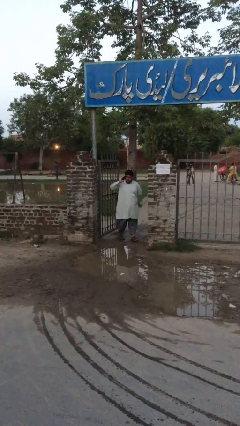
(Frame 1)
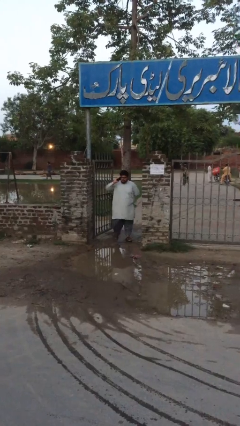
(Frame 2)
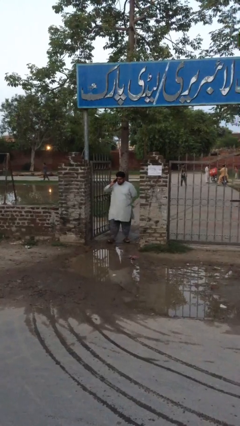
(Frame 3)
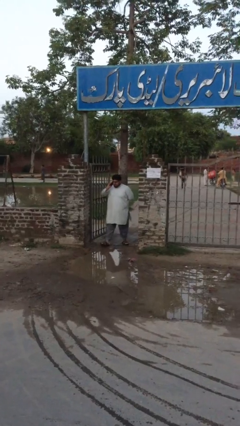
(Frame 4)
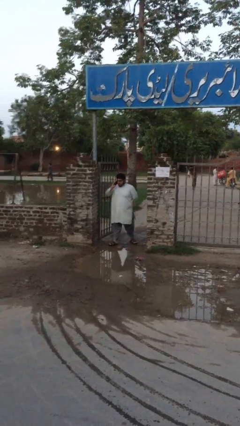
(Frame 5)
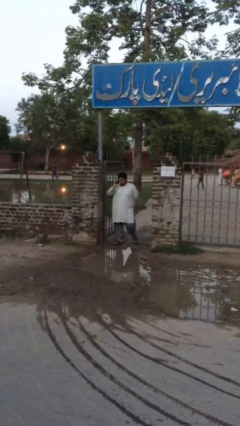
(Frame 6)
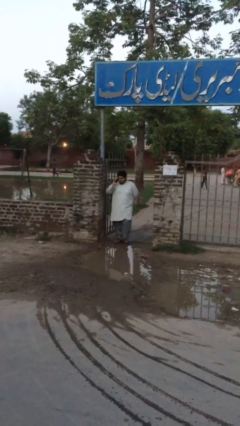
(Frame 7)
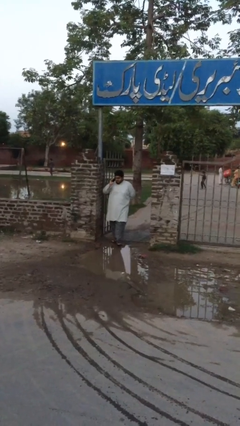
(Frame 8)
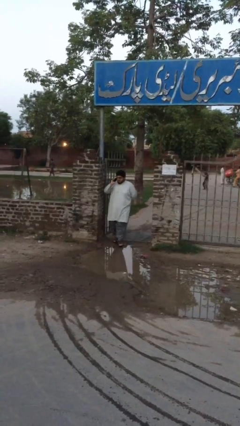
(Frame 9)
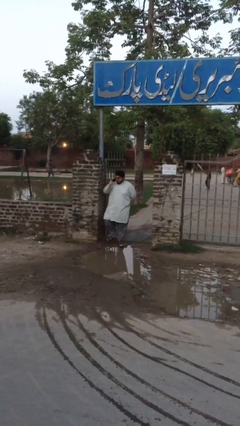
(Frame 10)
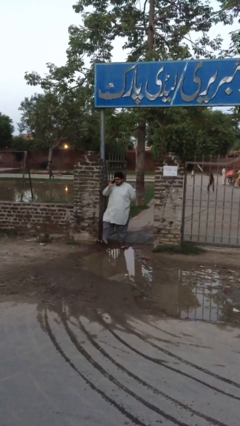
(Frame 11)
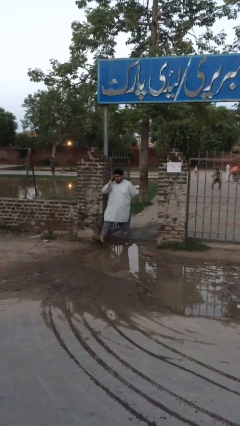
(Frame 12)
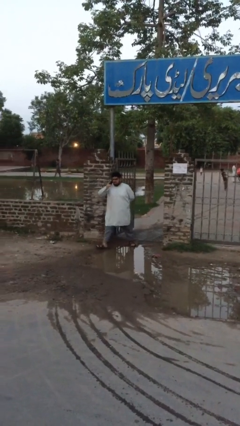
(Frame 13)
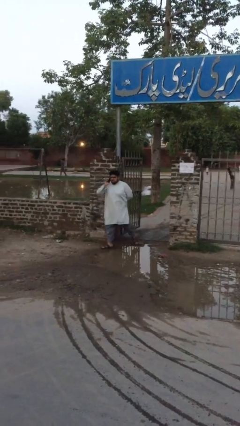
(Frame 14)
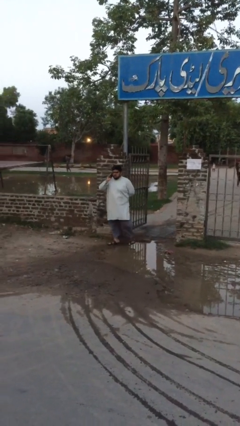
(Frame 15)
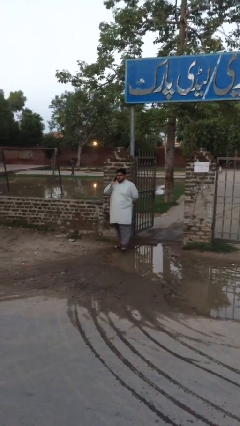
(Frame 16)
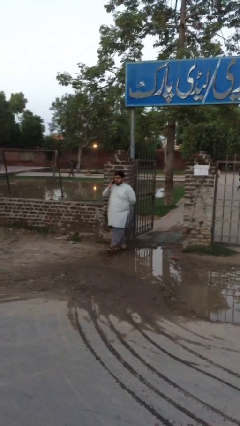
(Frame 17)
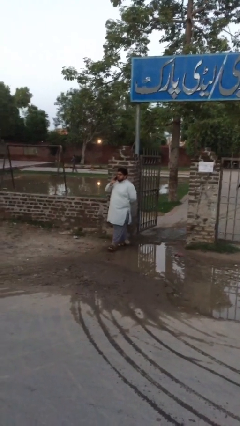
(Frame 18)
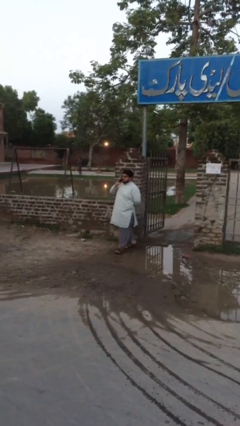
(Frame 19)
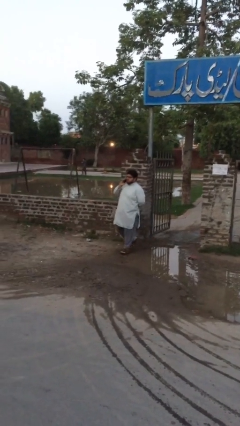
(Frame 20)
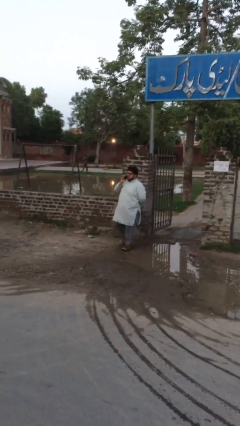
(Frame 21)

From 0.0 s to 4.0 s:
person enters scene through structure

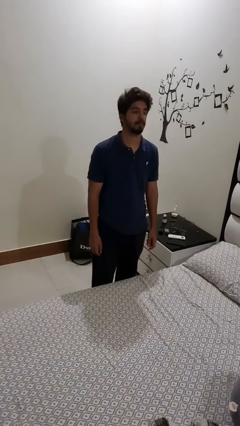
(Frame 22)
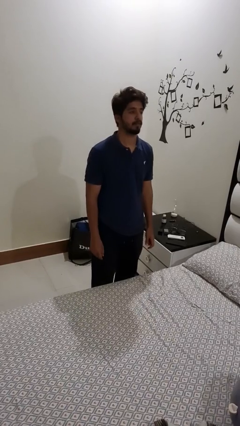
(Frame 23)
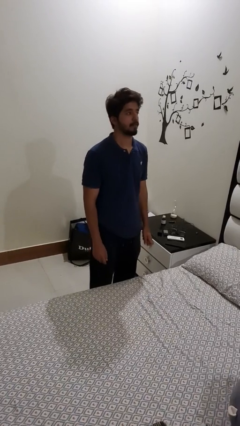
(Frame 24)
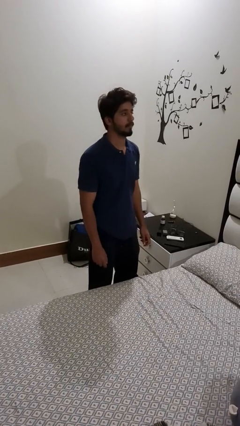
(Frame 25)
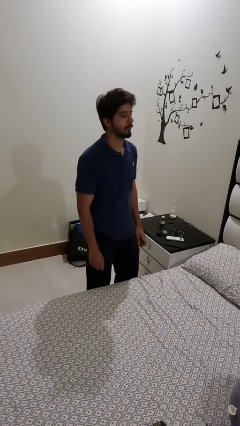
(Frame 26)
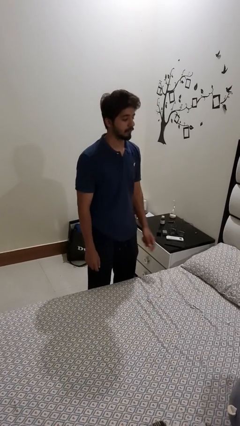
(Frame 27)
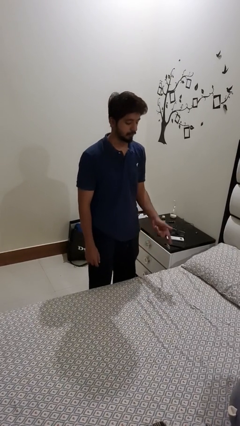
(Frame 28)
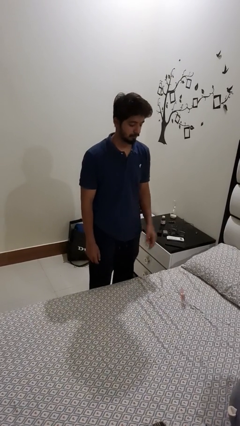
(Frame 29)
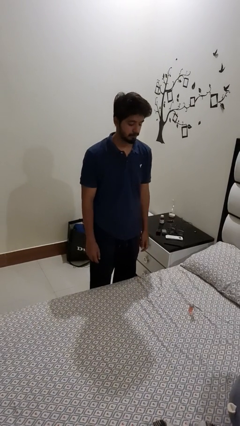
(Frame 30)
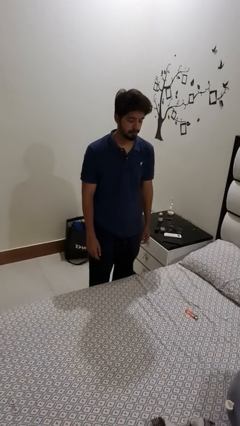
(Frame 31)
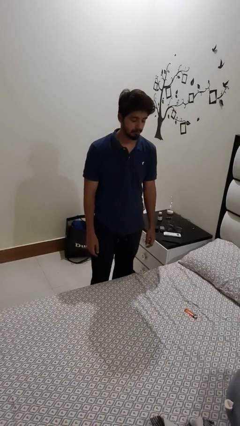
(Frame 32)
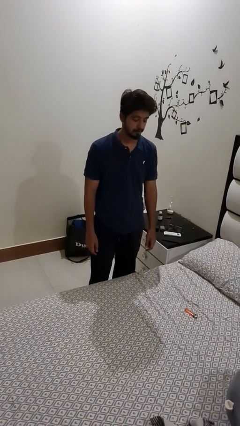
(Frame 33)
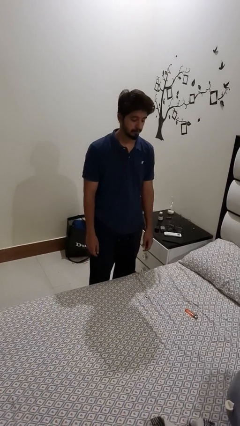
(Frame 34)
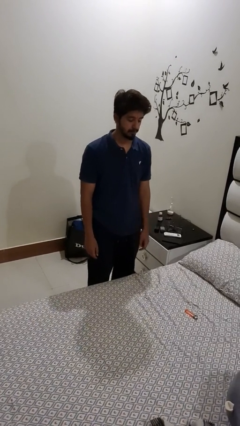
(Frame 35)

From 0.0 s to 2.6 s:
person throws object on bed

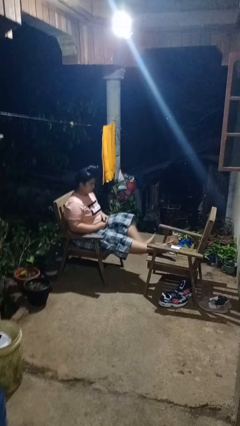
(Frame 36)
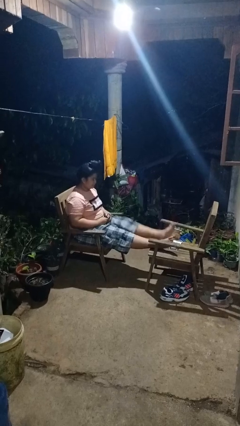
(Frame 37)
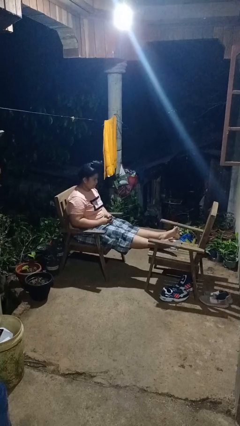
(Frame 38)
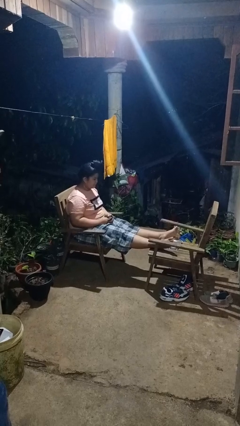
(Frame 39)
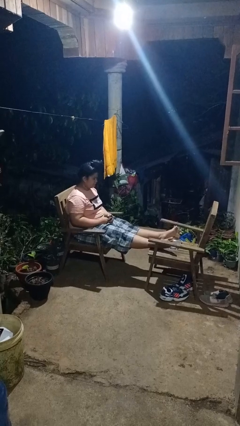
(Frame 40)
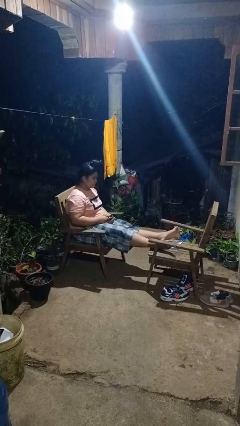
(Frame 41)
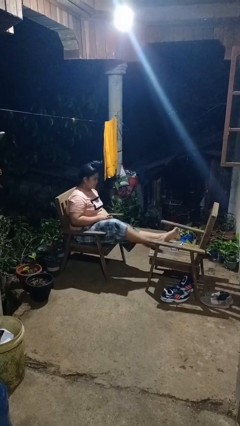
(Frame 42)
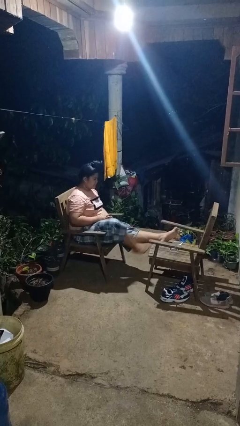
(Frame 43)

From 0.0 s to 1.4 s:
person puts feet up

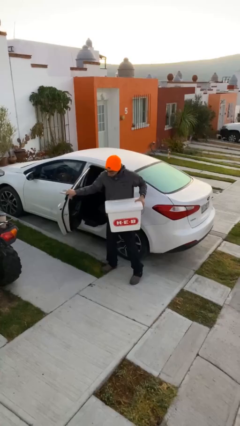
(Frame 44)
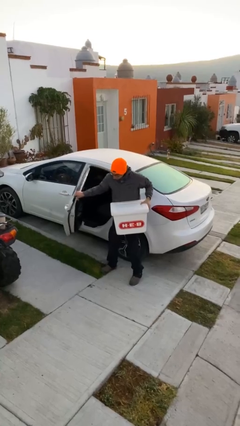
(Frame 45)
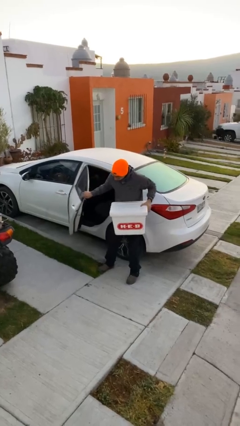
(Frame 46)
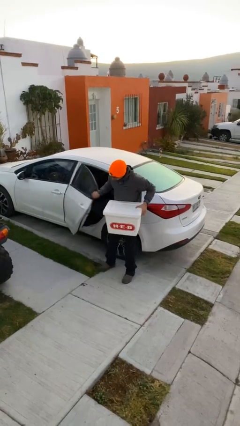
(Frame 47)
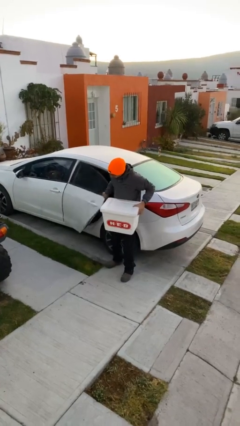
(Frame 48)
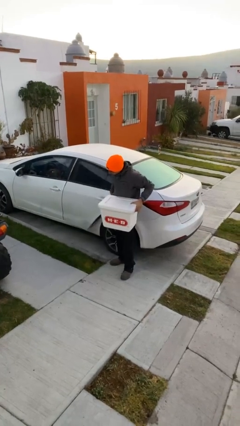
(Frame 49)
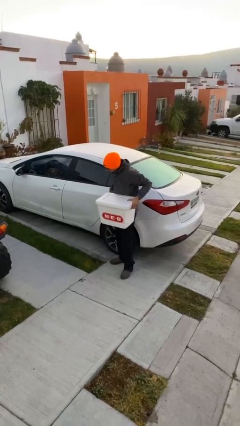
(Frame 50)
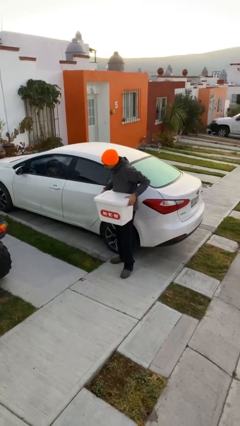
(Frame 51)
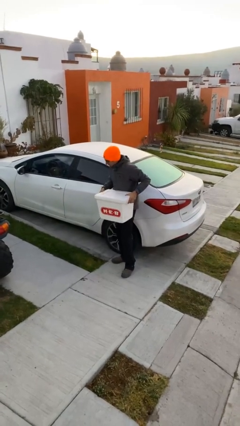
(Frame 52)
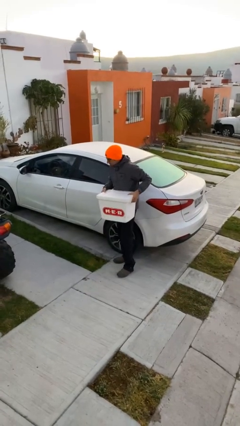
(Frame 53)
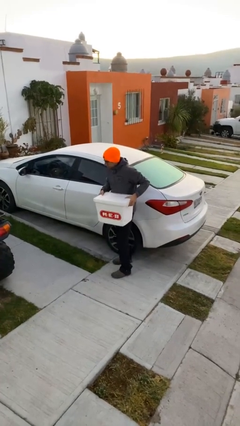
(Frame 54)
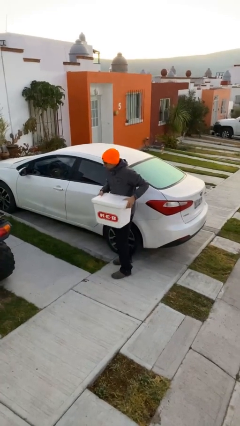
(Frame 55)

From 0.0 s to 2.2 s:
person closes car door

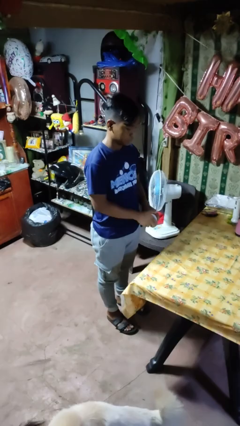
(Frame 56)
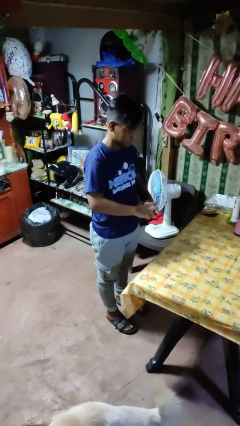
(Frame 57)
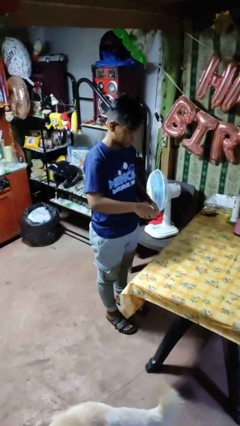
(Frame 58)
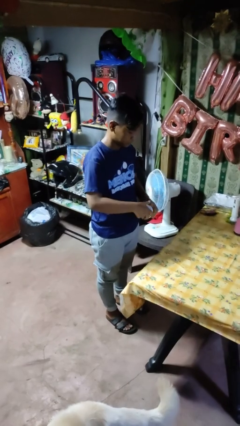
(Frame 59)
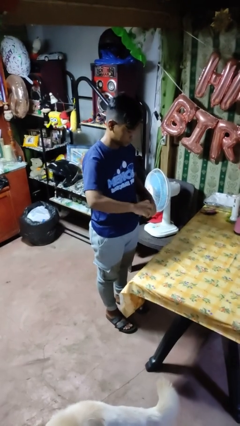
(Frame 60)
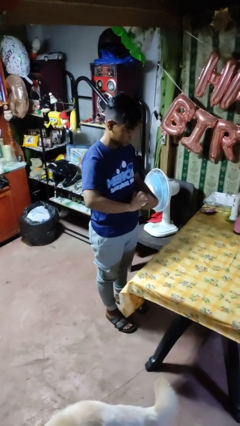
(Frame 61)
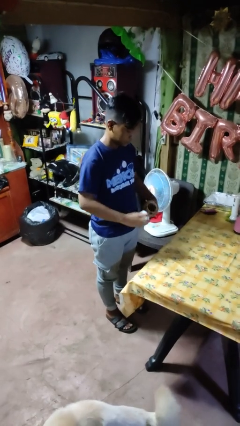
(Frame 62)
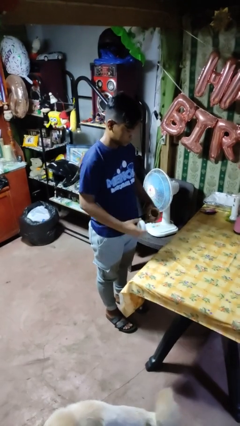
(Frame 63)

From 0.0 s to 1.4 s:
person opens jar

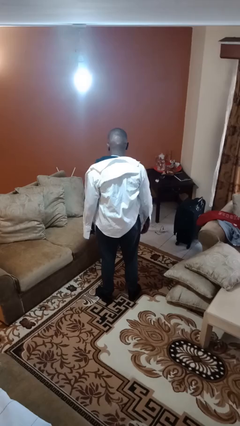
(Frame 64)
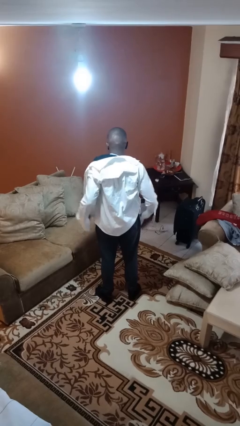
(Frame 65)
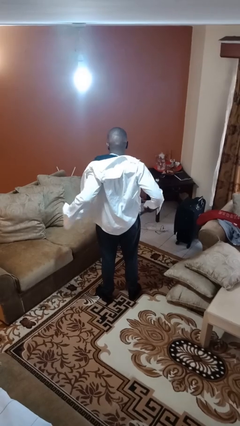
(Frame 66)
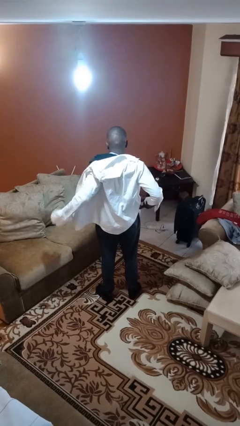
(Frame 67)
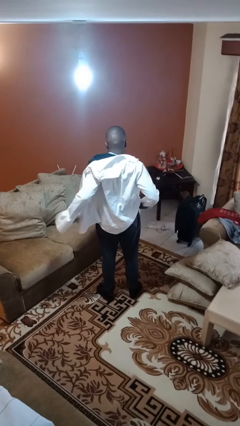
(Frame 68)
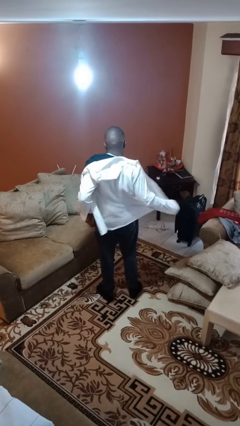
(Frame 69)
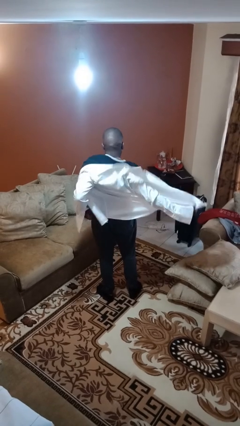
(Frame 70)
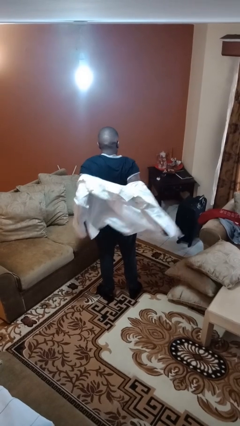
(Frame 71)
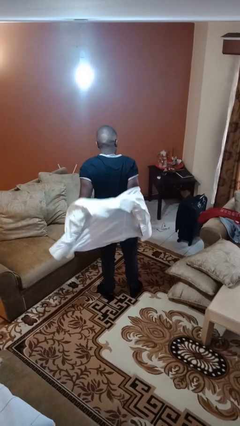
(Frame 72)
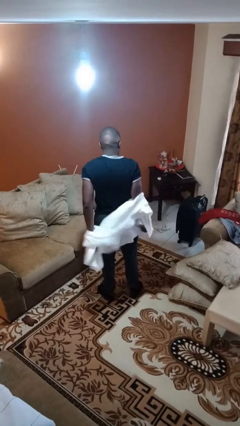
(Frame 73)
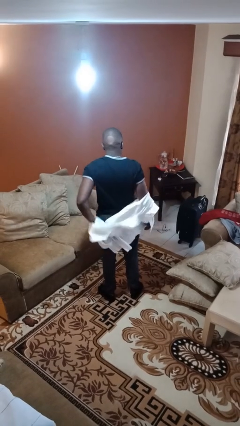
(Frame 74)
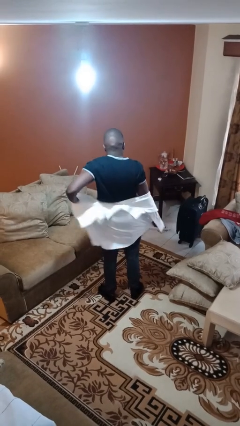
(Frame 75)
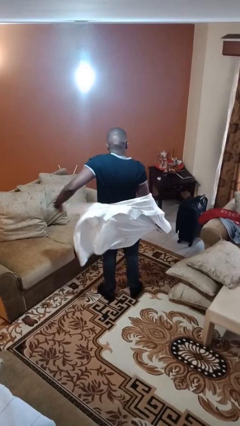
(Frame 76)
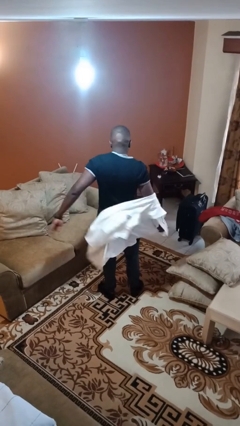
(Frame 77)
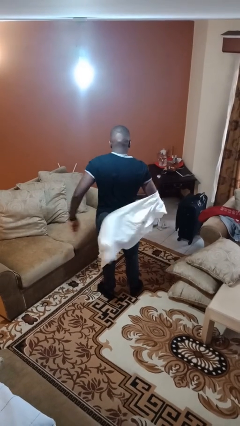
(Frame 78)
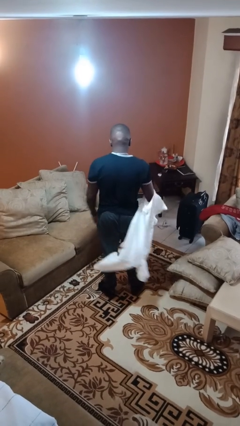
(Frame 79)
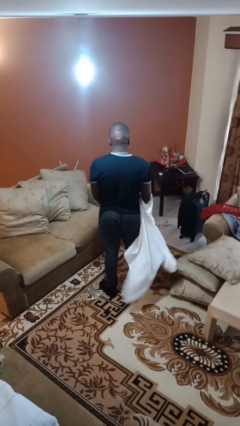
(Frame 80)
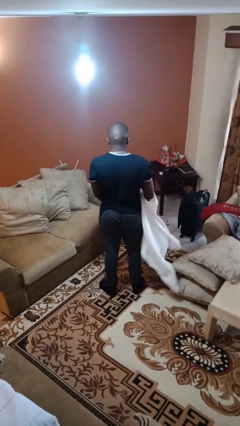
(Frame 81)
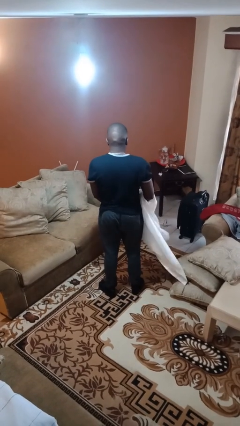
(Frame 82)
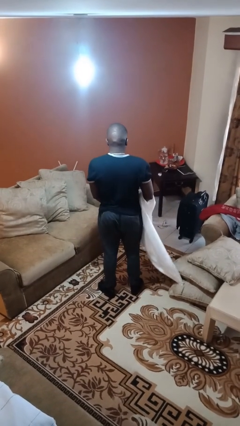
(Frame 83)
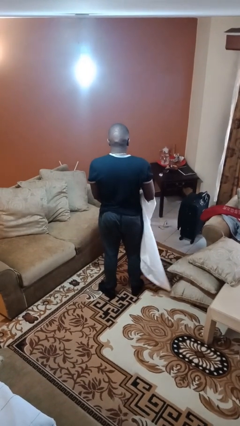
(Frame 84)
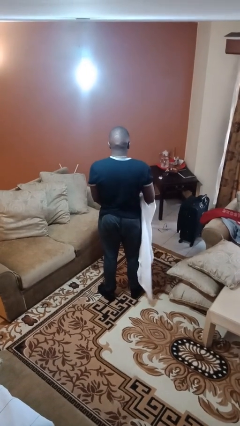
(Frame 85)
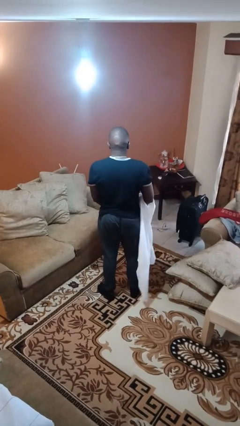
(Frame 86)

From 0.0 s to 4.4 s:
person takes off shirt

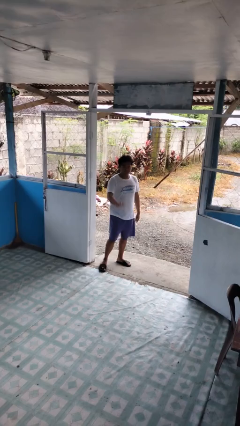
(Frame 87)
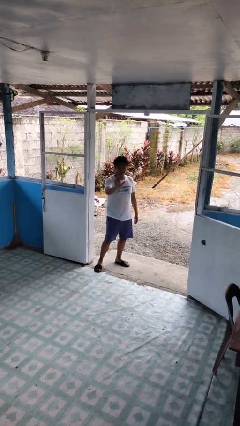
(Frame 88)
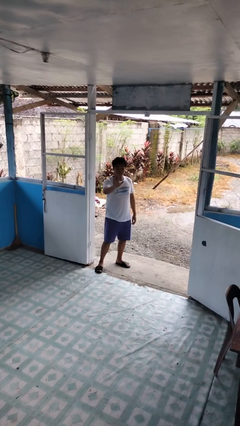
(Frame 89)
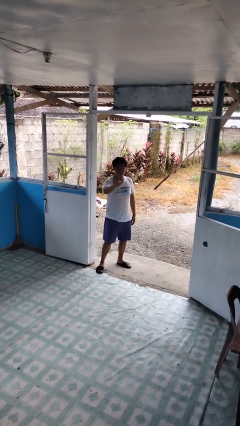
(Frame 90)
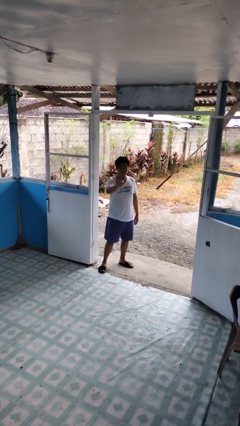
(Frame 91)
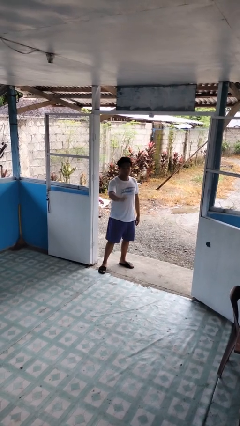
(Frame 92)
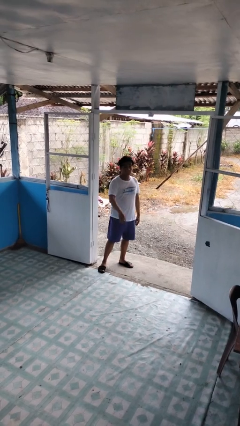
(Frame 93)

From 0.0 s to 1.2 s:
person gestures stop
